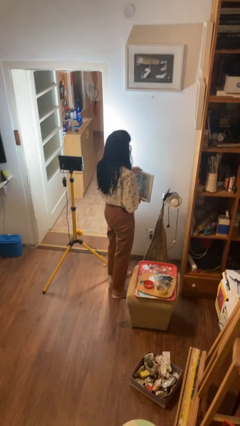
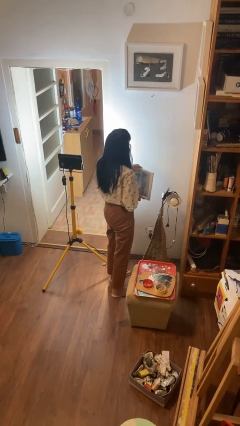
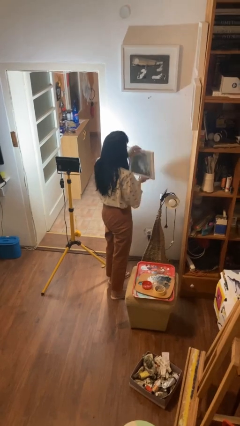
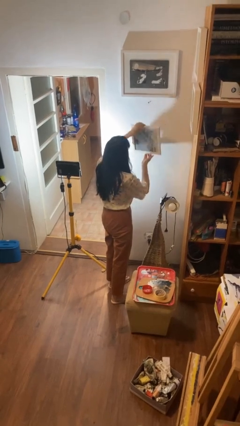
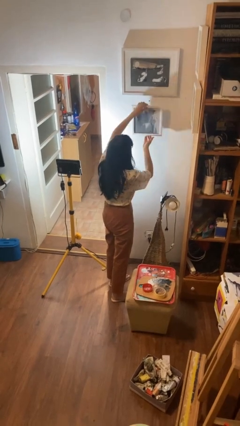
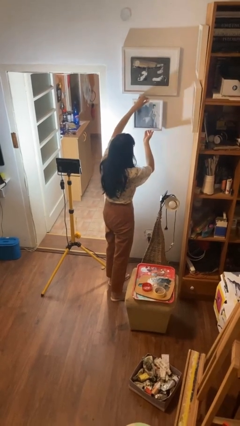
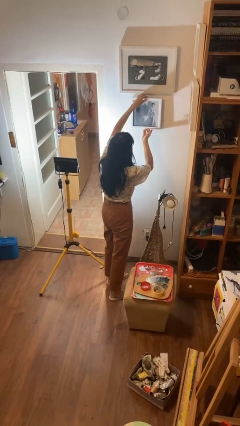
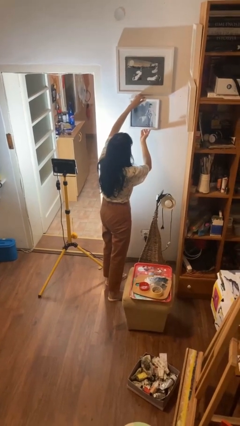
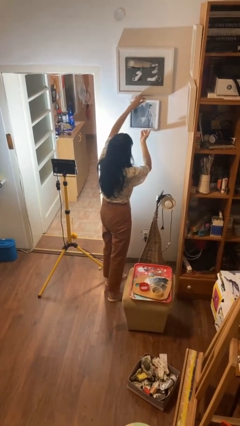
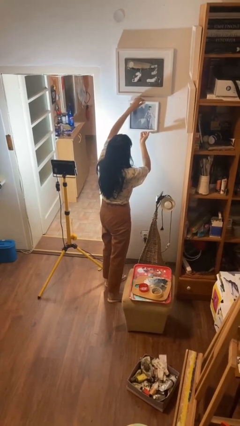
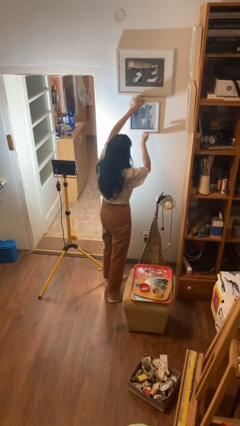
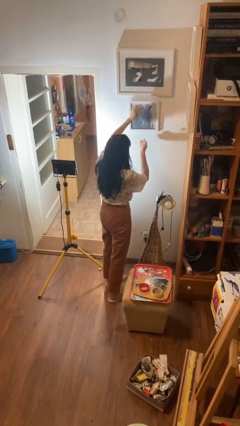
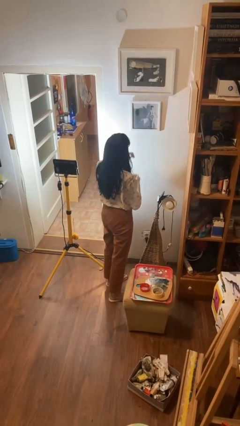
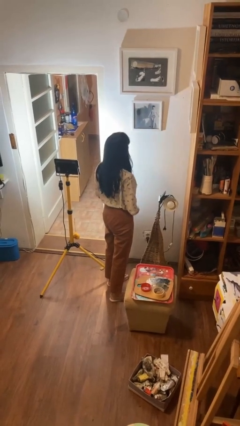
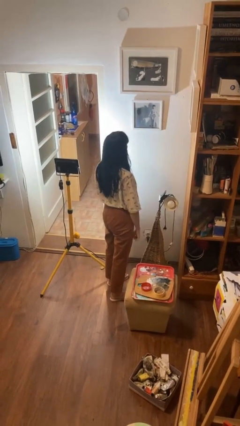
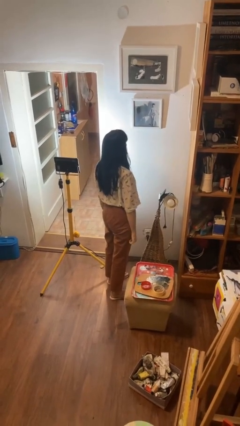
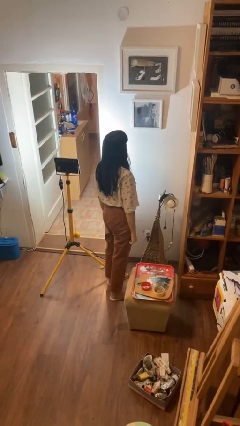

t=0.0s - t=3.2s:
person puts up picture frame

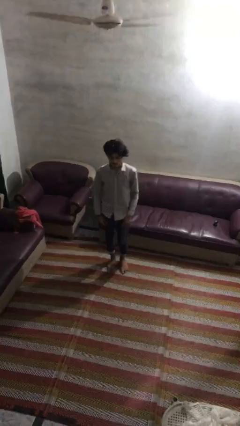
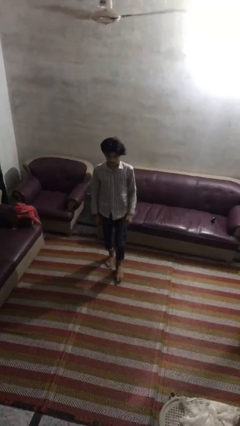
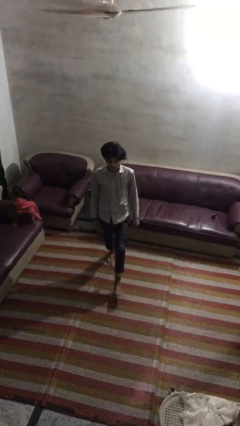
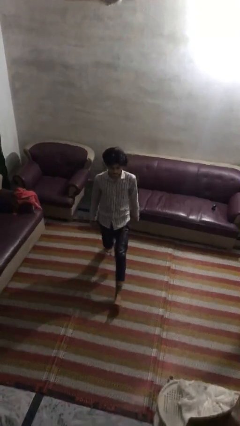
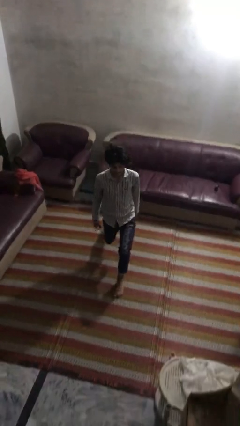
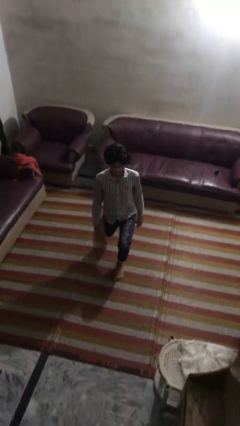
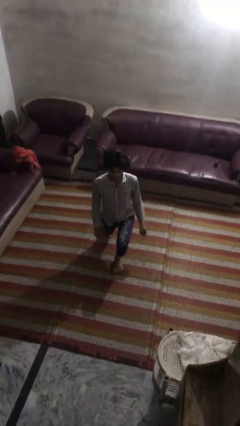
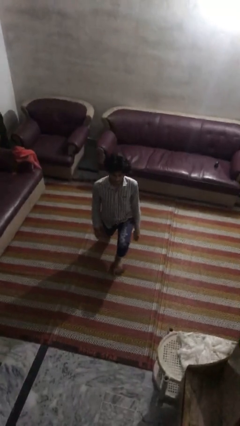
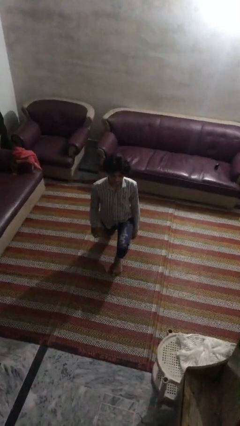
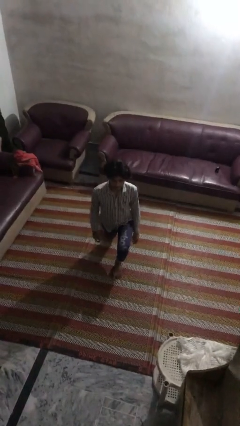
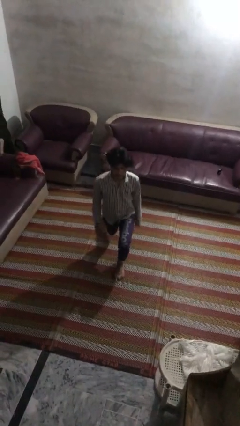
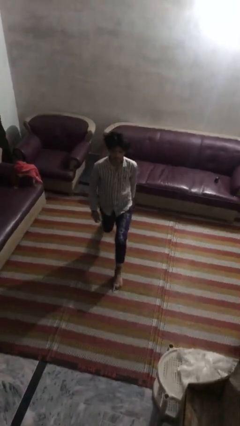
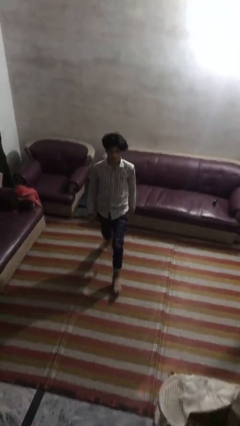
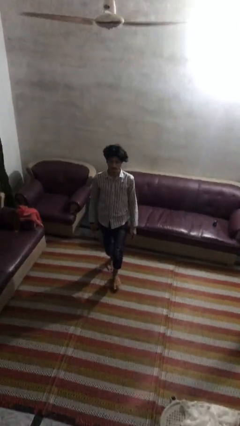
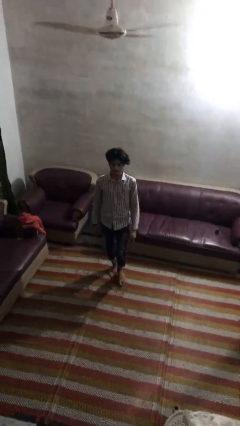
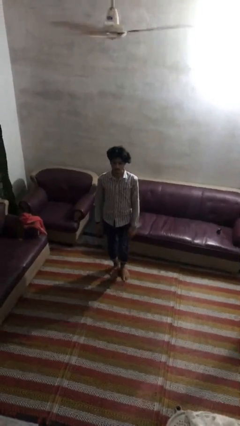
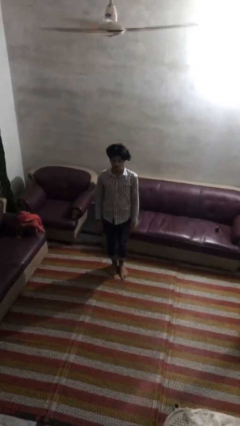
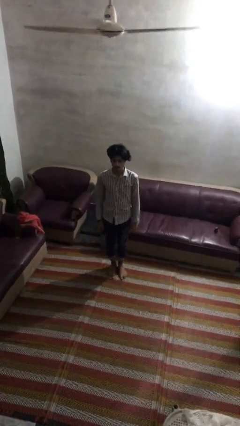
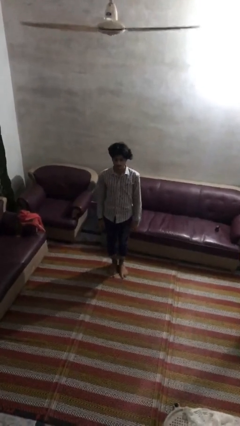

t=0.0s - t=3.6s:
person exercises with lunges

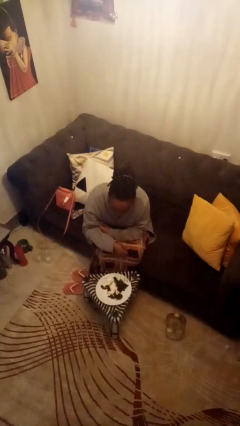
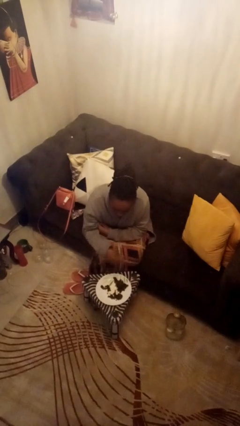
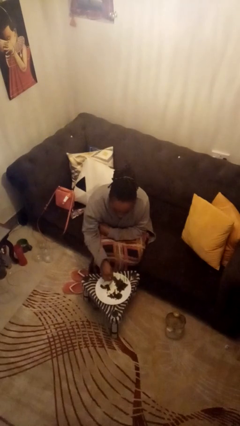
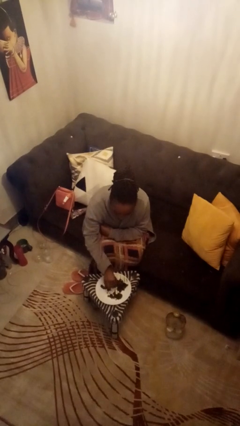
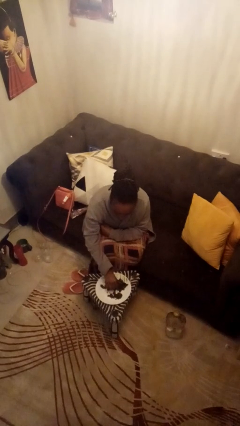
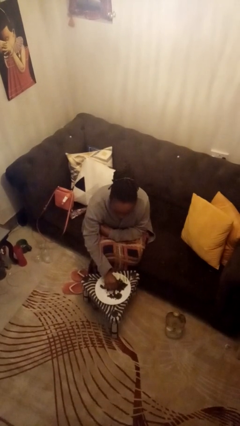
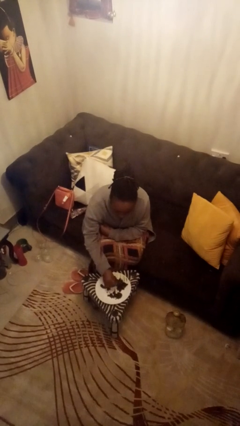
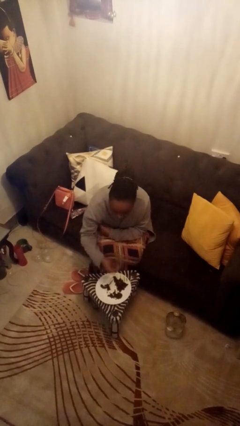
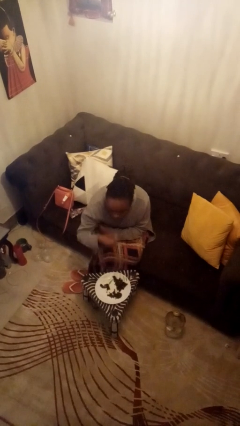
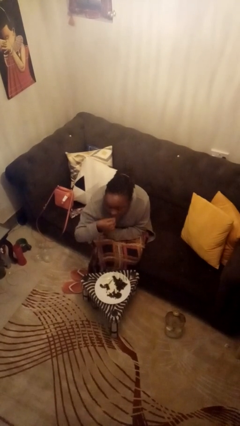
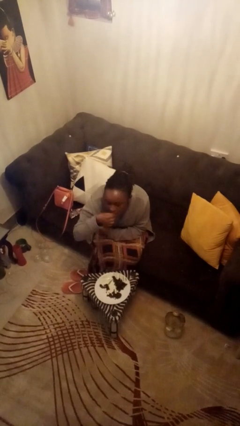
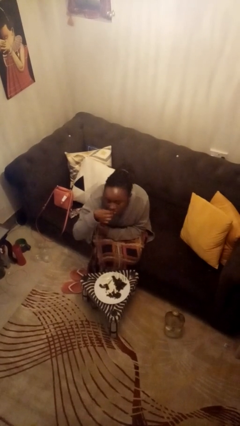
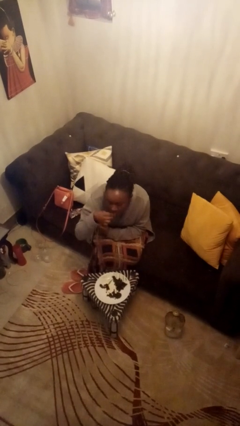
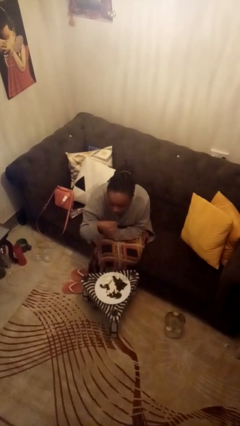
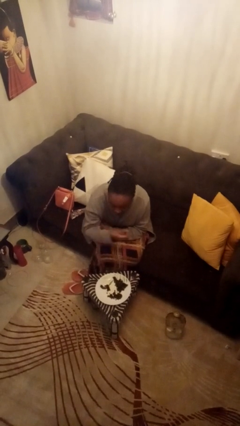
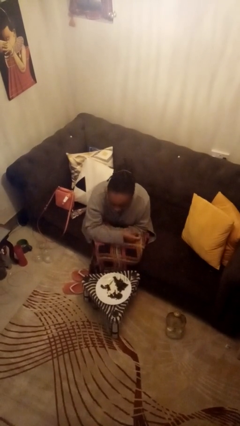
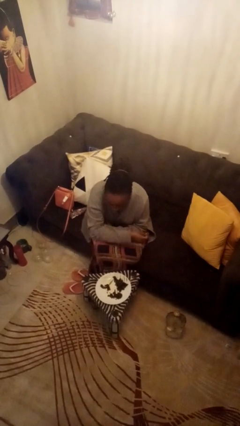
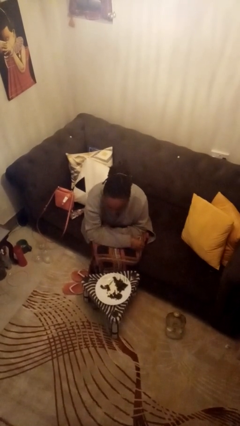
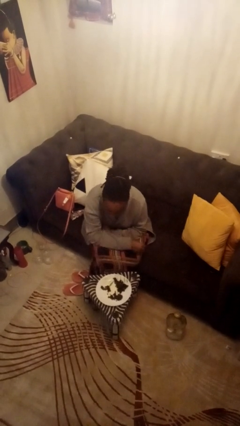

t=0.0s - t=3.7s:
person eats with hands

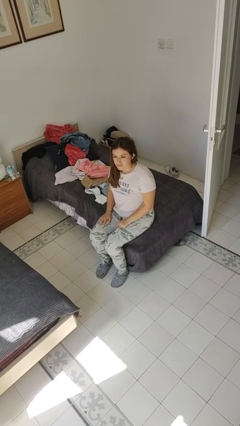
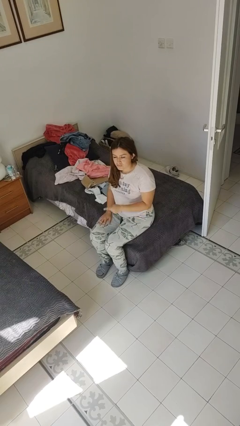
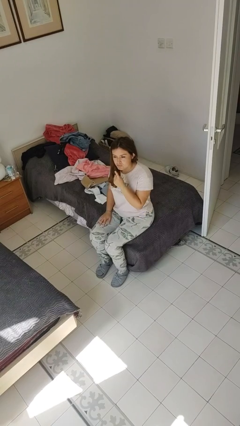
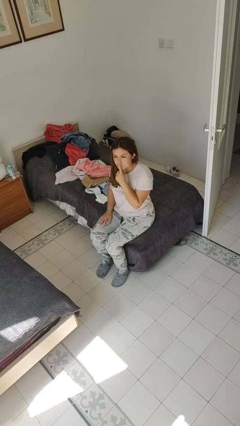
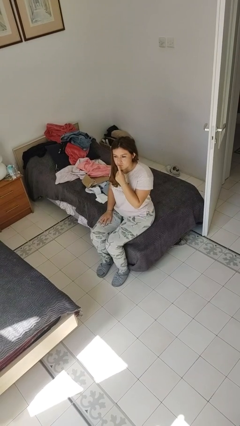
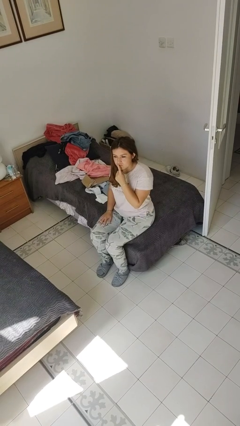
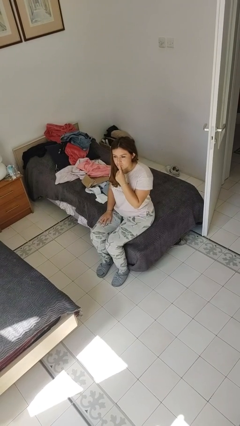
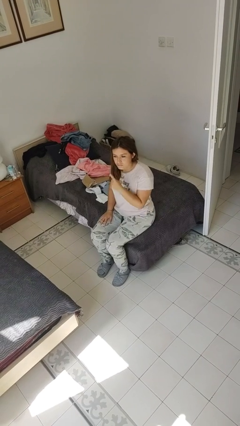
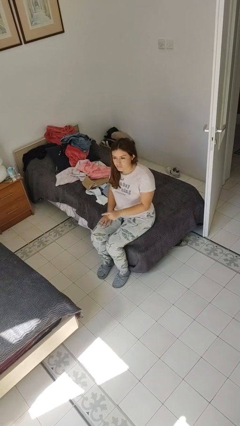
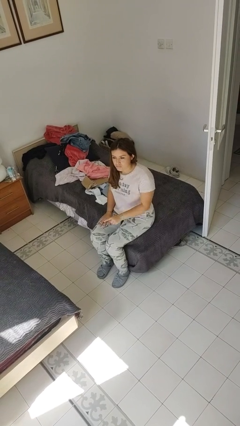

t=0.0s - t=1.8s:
person gestures be quiet

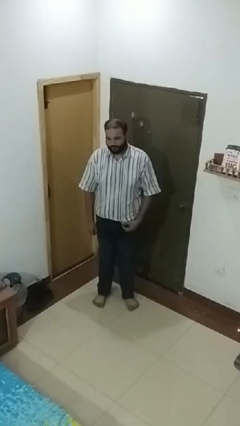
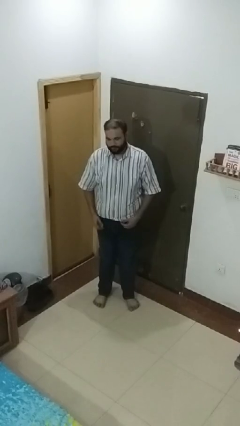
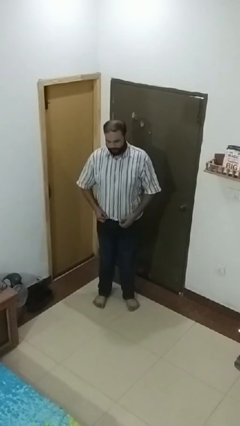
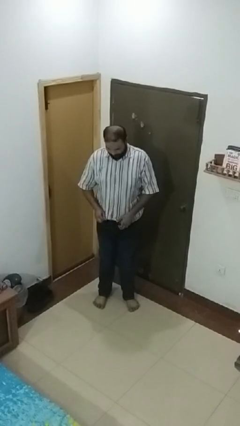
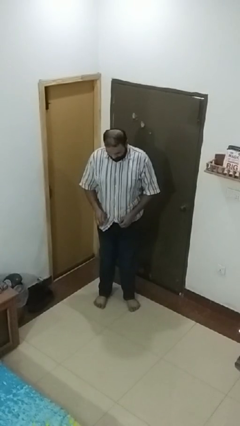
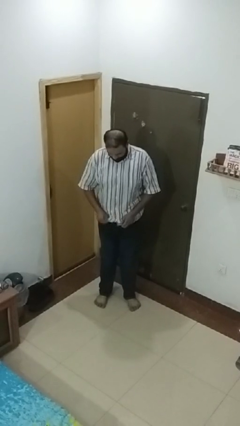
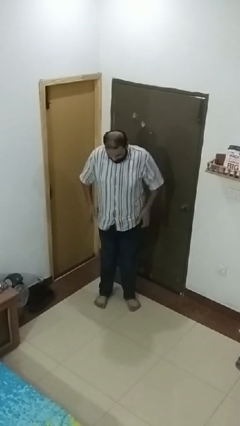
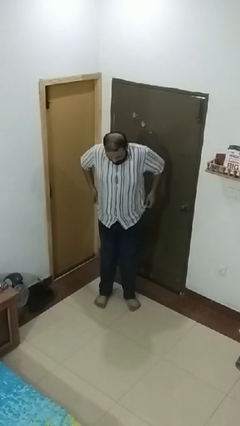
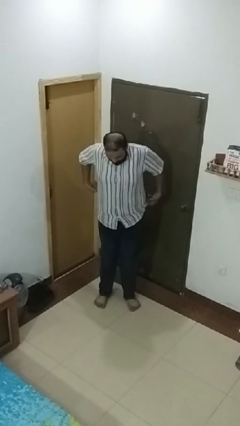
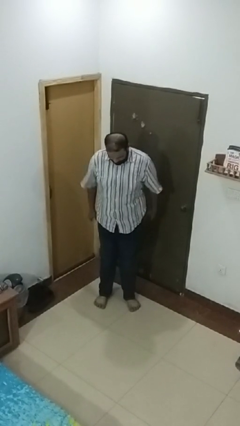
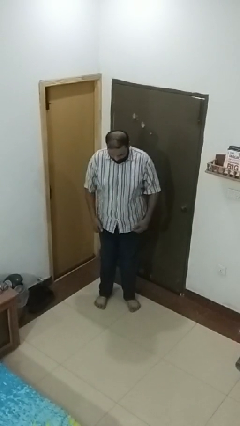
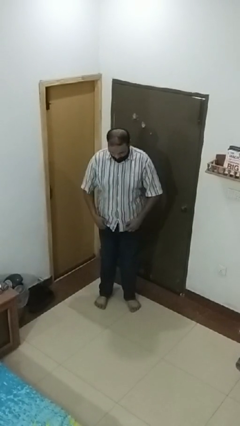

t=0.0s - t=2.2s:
person untucks shirt

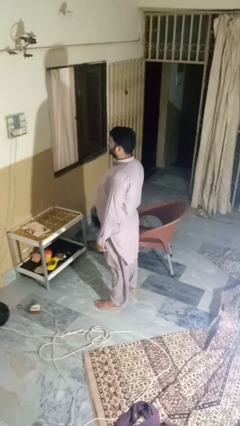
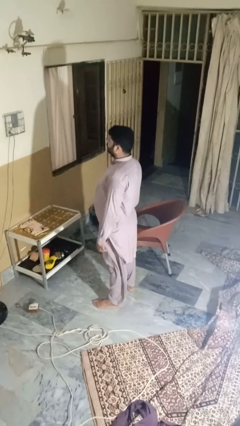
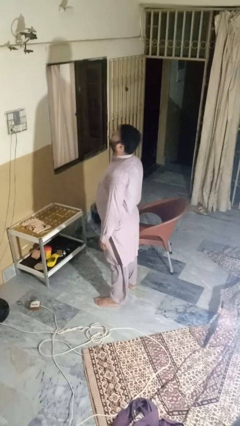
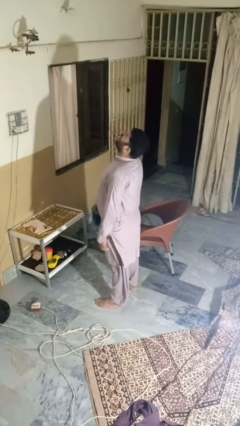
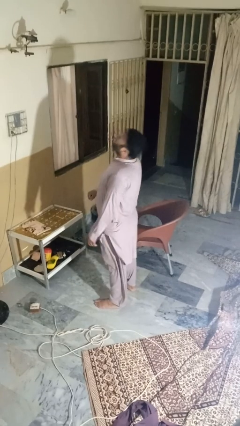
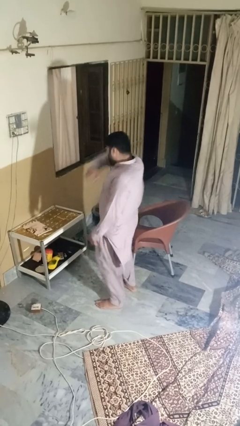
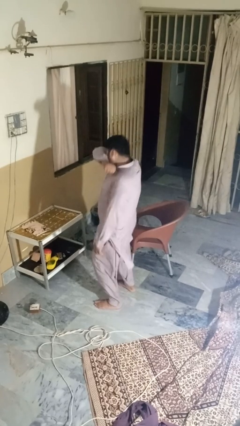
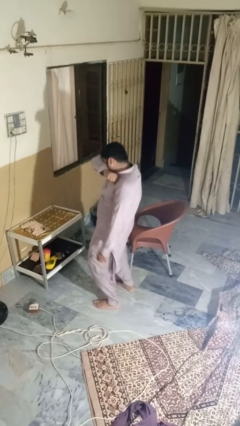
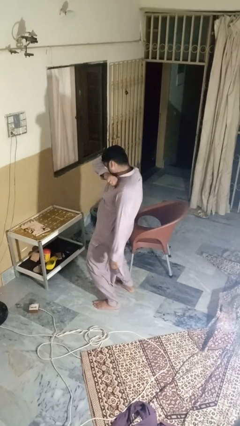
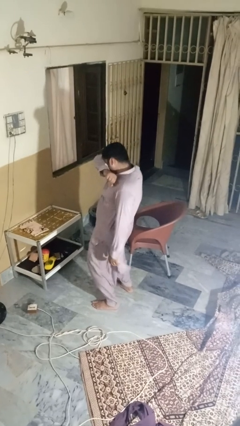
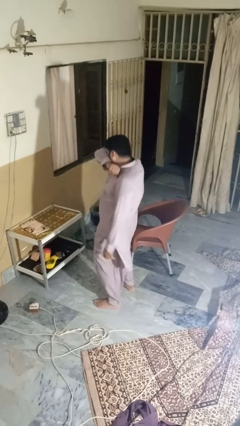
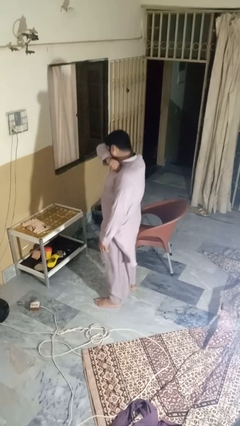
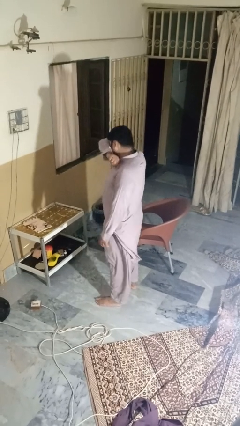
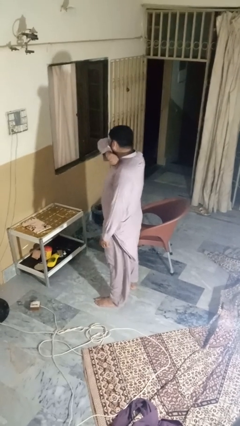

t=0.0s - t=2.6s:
person sneezes into arm

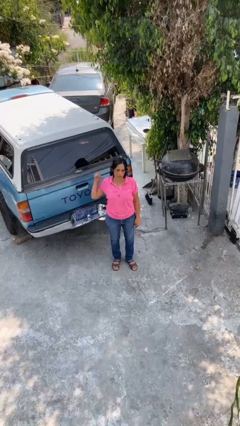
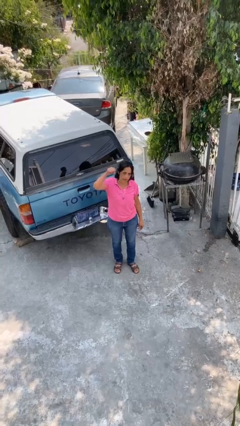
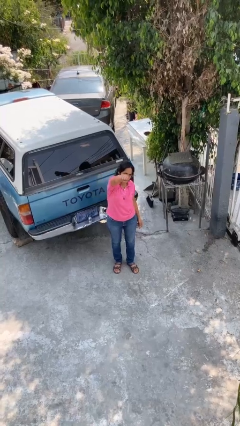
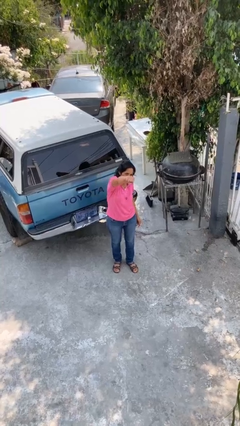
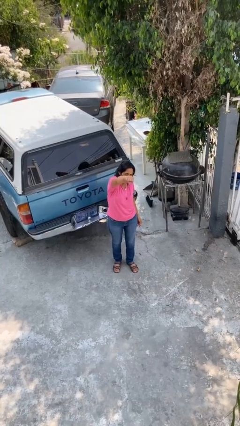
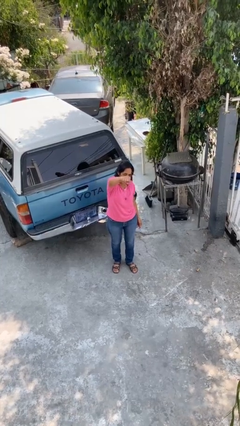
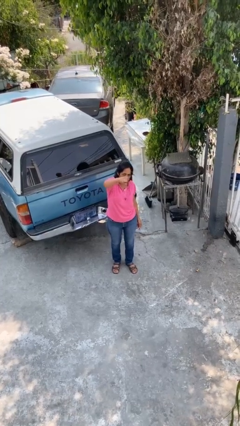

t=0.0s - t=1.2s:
person punches
